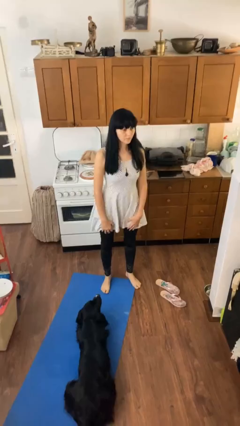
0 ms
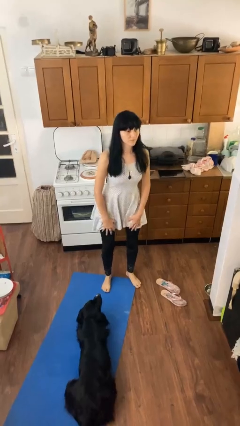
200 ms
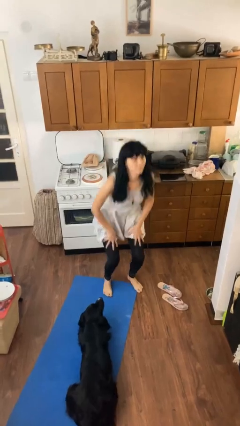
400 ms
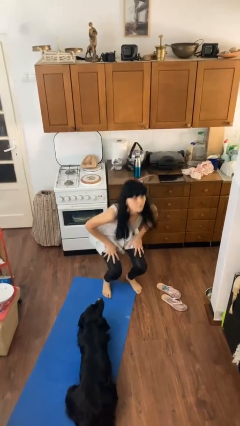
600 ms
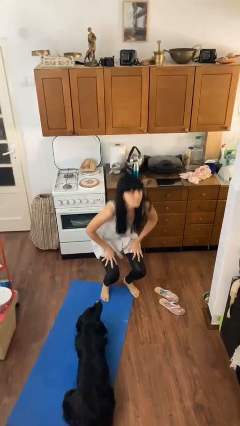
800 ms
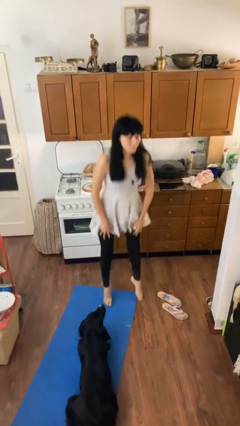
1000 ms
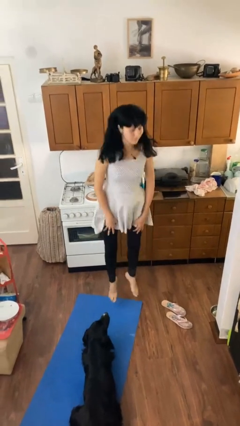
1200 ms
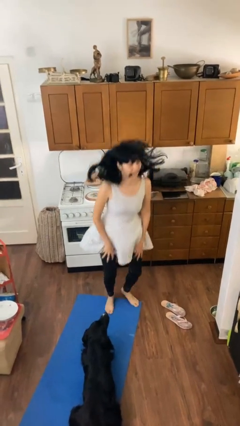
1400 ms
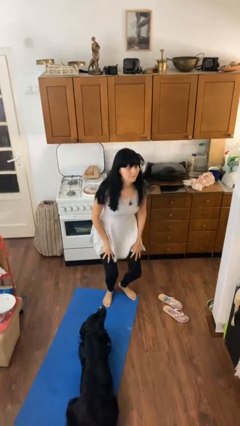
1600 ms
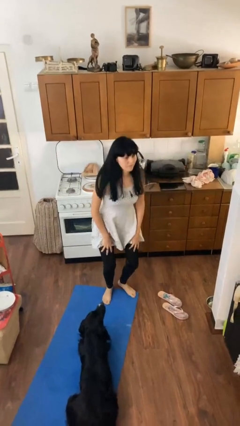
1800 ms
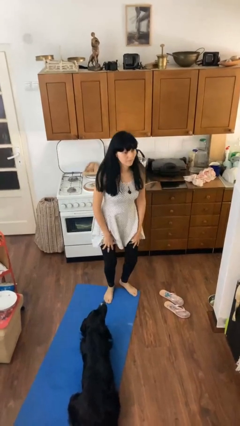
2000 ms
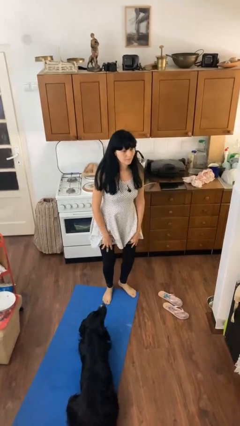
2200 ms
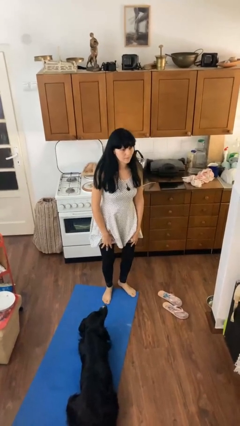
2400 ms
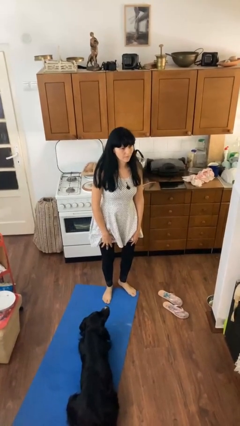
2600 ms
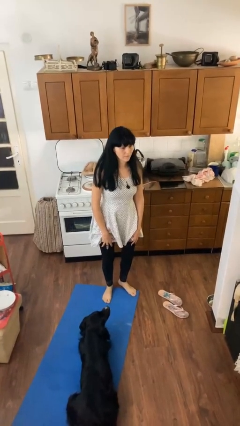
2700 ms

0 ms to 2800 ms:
person jumps

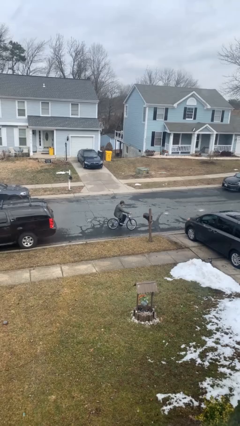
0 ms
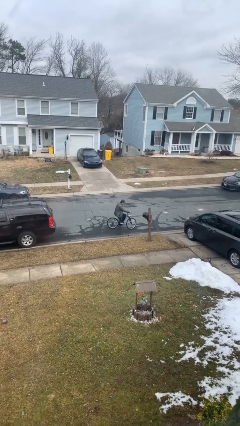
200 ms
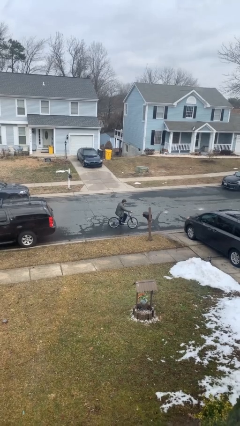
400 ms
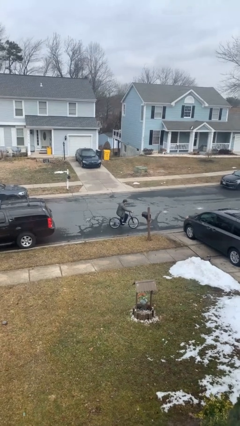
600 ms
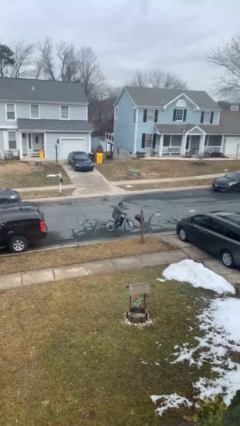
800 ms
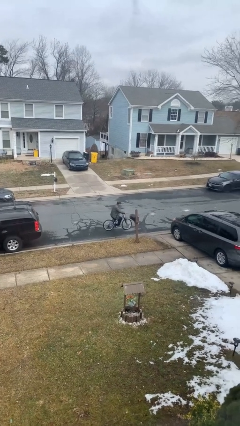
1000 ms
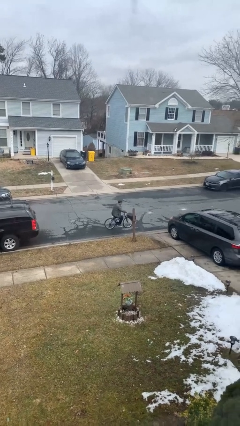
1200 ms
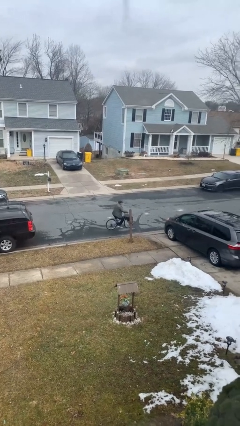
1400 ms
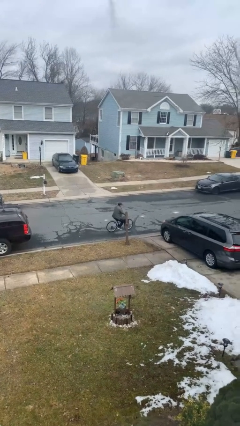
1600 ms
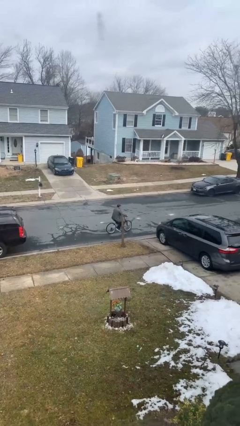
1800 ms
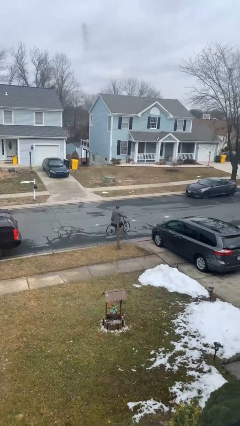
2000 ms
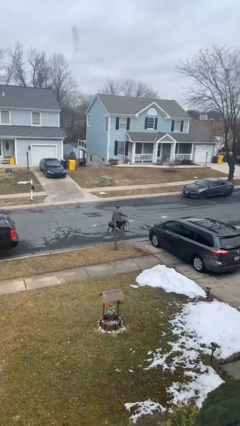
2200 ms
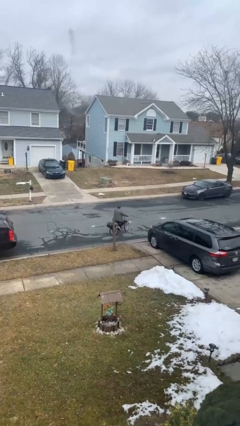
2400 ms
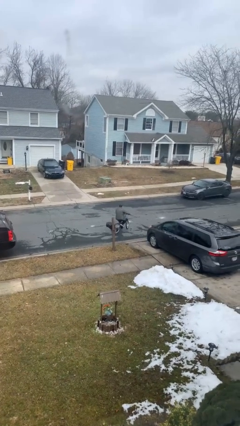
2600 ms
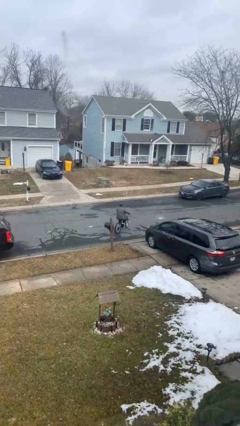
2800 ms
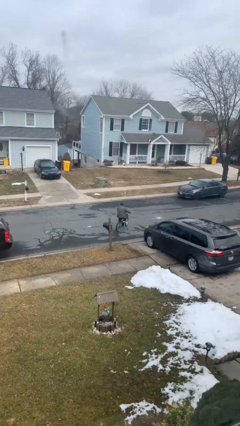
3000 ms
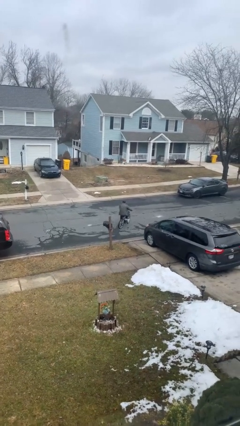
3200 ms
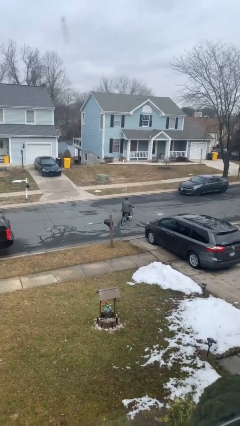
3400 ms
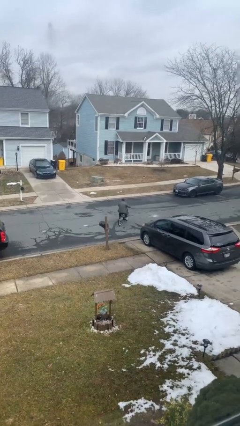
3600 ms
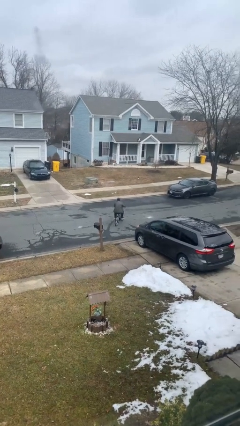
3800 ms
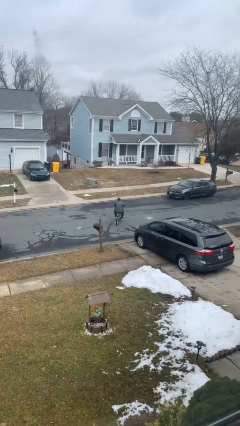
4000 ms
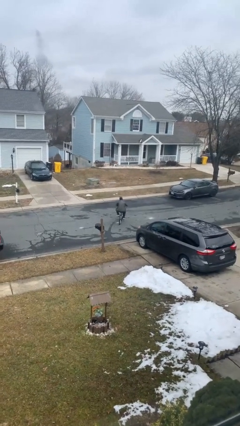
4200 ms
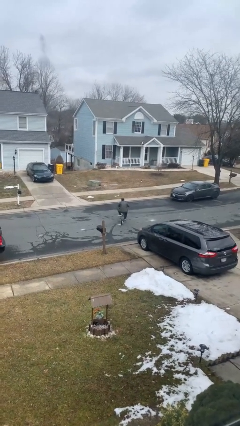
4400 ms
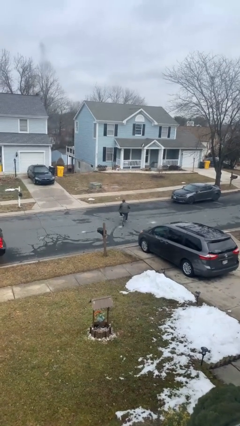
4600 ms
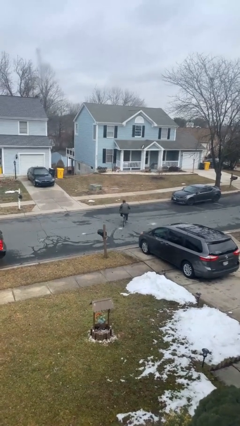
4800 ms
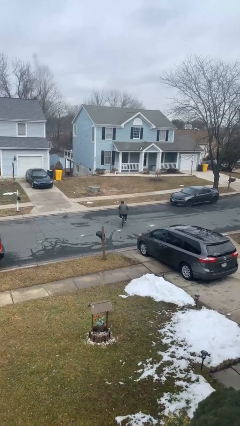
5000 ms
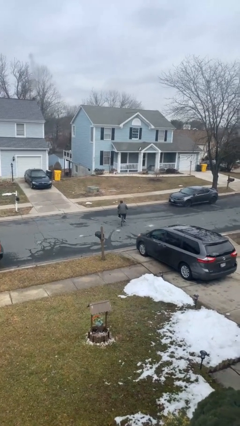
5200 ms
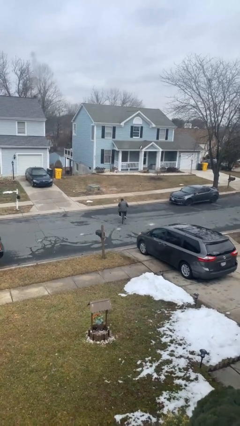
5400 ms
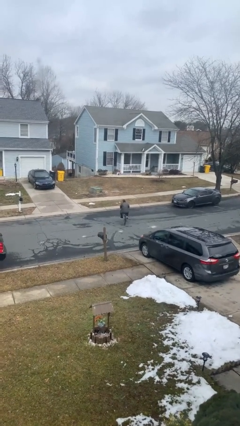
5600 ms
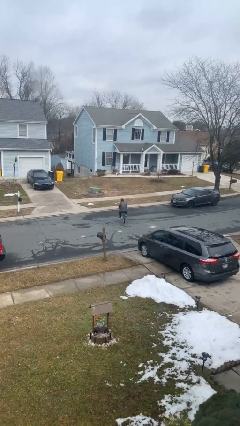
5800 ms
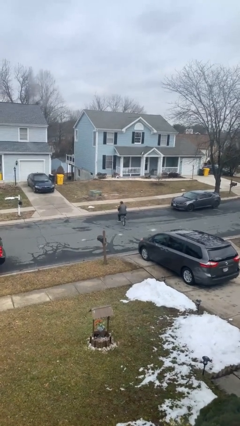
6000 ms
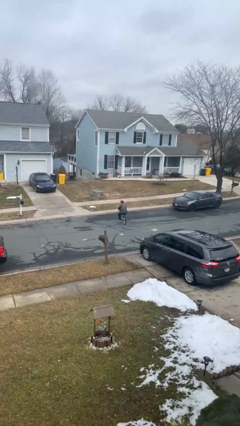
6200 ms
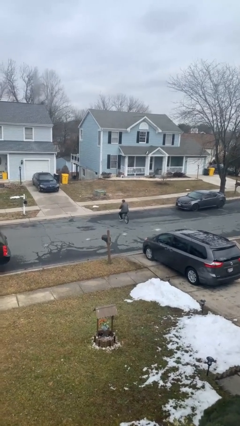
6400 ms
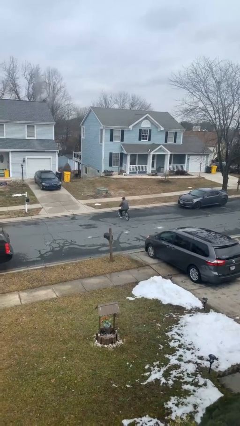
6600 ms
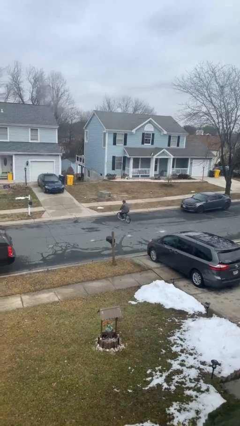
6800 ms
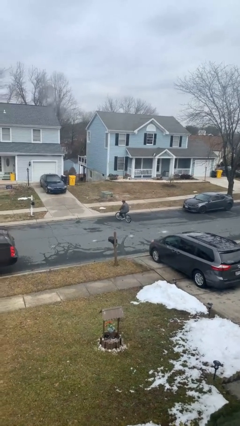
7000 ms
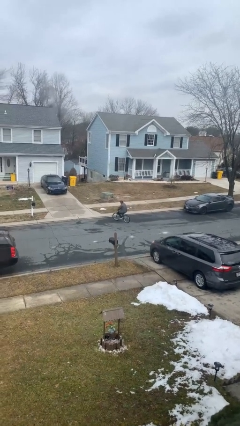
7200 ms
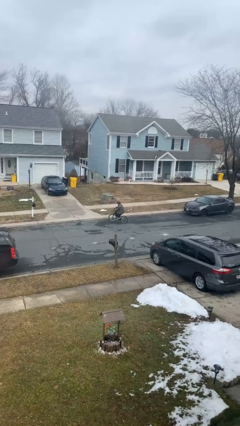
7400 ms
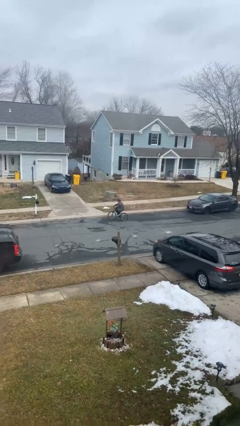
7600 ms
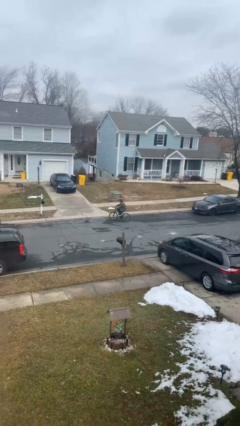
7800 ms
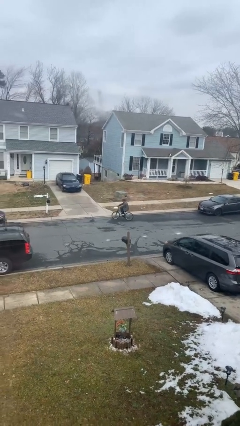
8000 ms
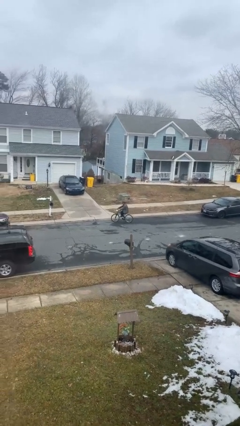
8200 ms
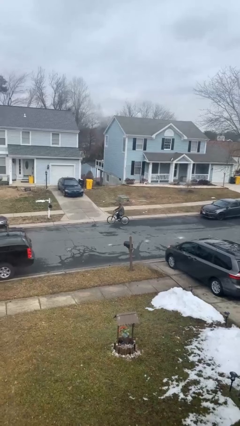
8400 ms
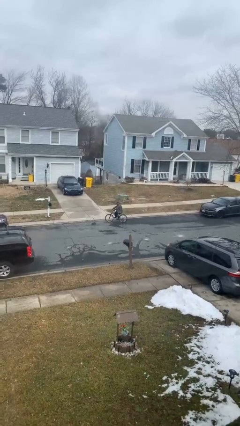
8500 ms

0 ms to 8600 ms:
person rides bicycle

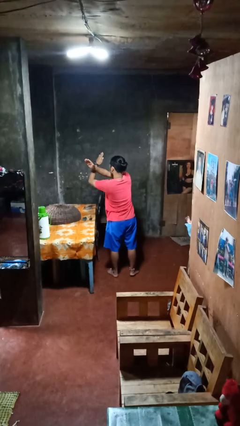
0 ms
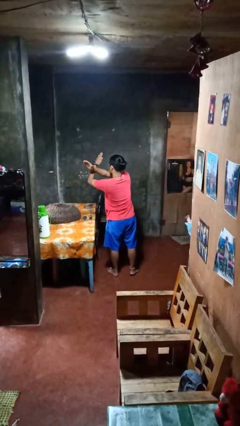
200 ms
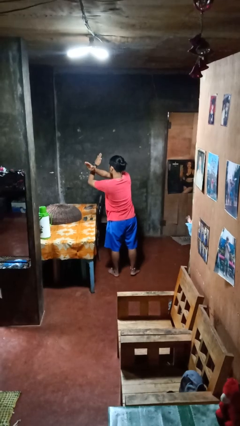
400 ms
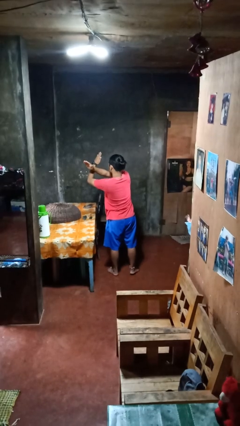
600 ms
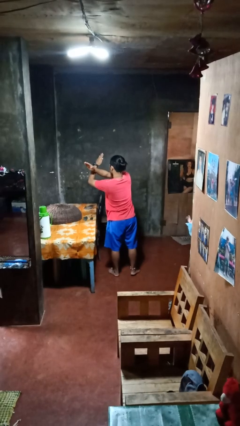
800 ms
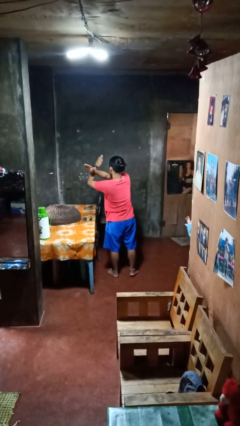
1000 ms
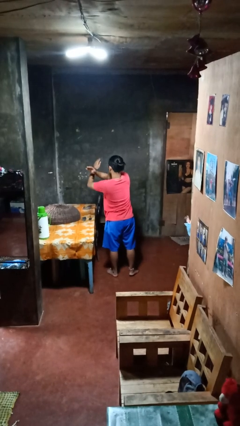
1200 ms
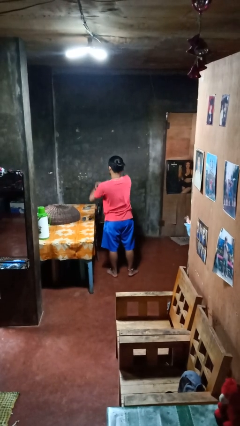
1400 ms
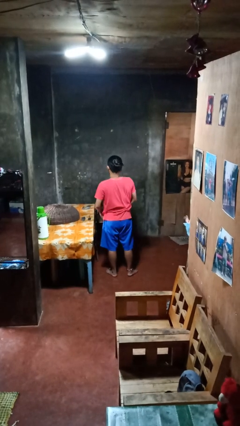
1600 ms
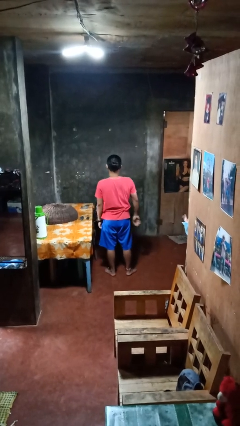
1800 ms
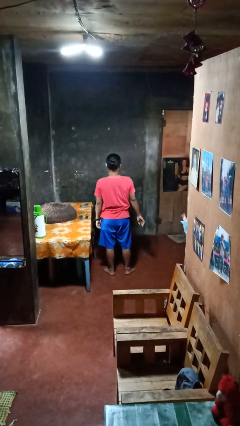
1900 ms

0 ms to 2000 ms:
person gestures arms x

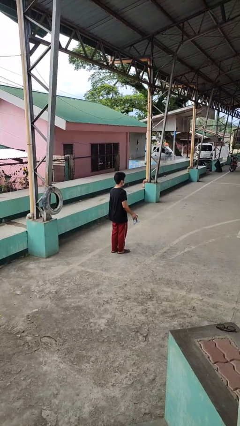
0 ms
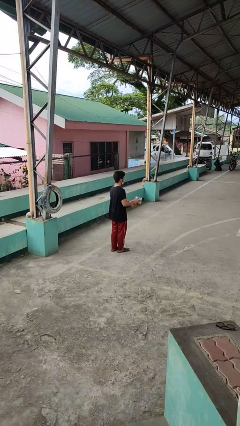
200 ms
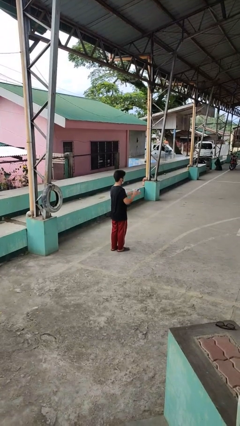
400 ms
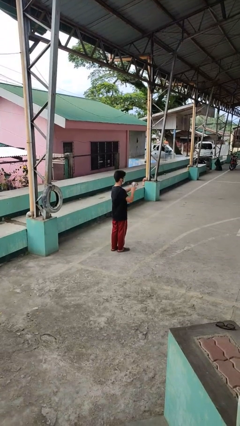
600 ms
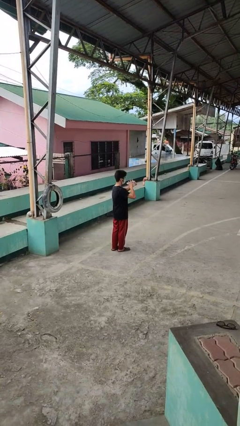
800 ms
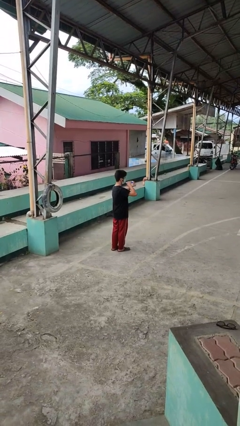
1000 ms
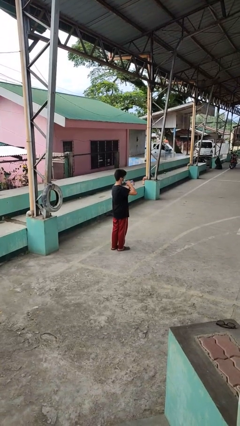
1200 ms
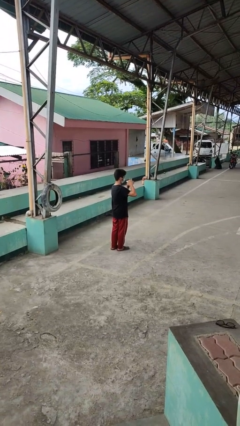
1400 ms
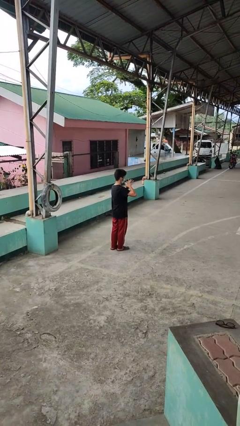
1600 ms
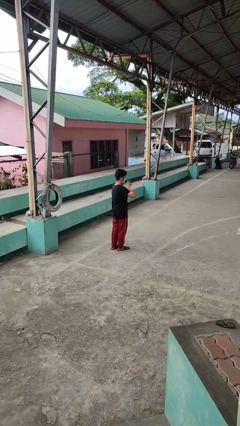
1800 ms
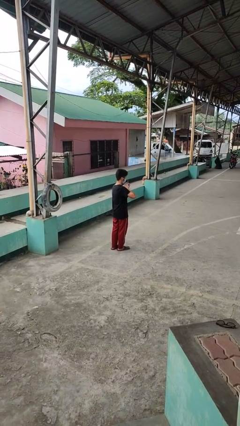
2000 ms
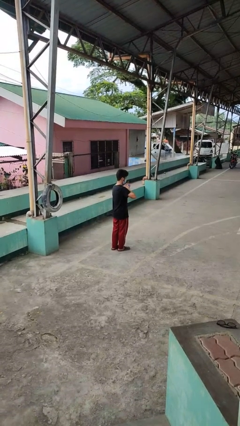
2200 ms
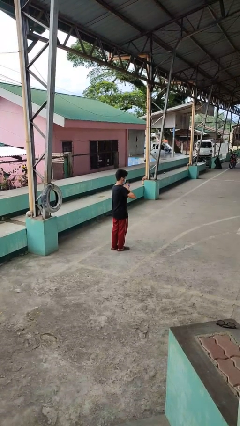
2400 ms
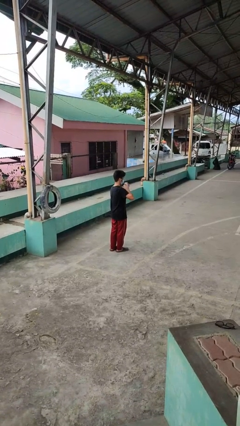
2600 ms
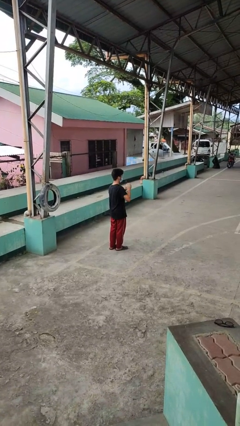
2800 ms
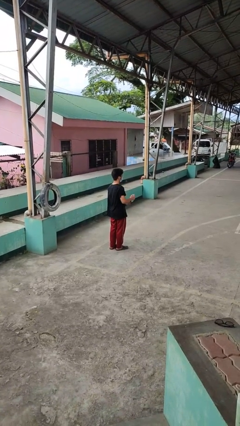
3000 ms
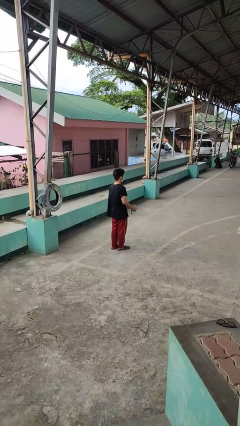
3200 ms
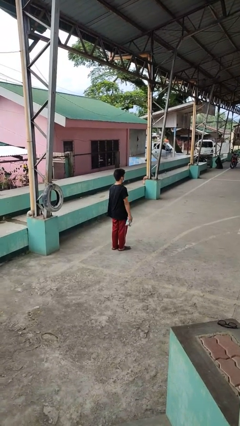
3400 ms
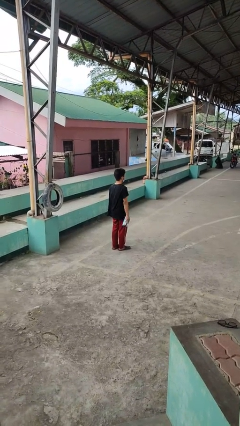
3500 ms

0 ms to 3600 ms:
person squeezes object

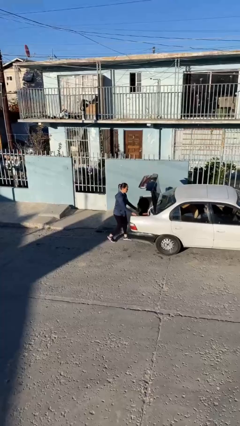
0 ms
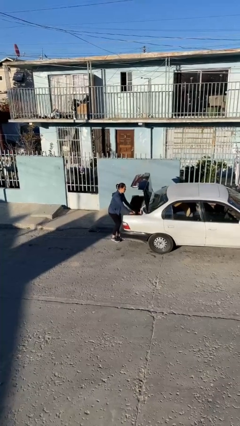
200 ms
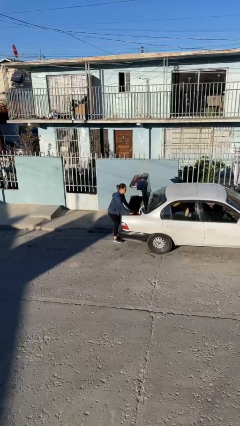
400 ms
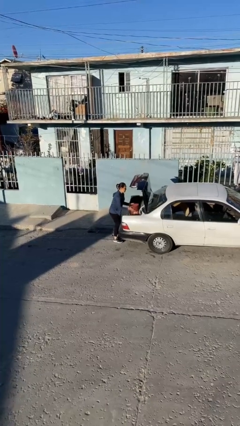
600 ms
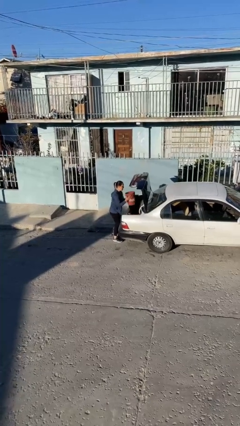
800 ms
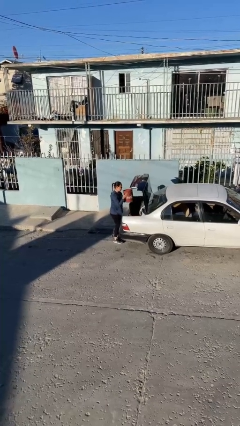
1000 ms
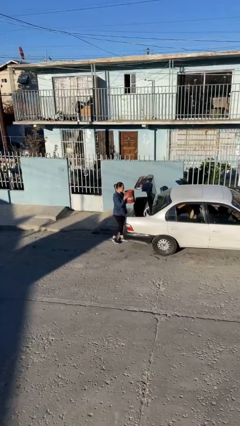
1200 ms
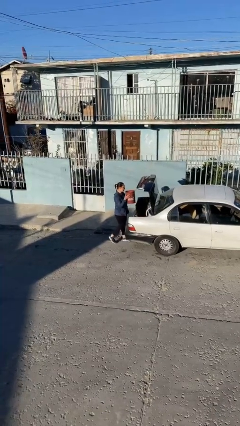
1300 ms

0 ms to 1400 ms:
person unloads car
